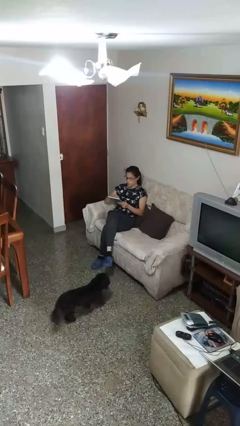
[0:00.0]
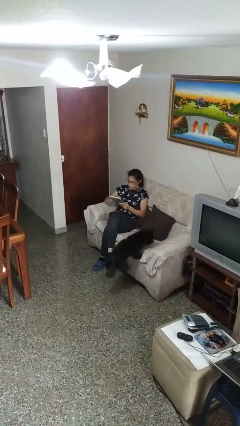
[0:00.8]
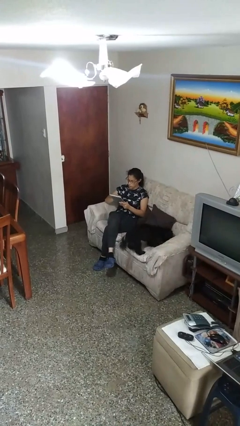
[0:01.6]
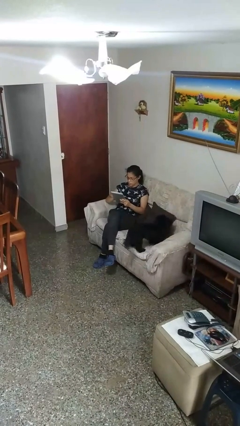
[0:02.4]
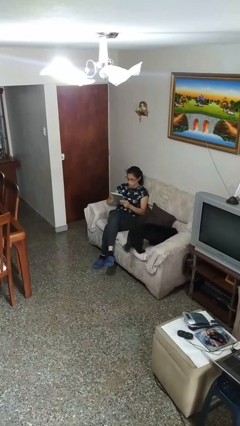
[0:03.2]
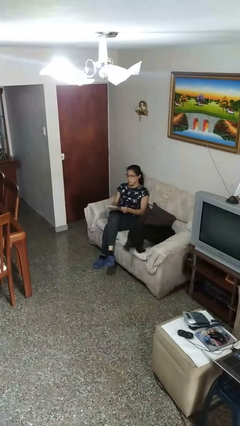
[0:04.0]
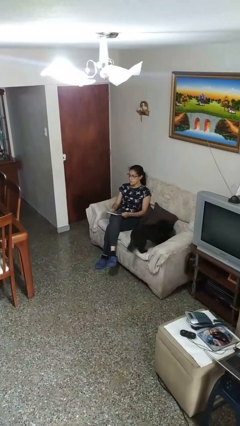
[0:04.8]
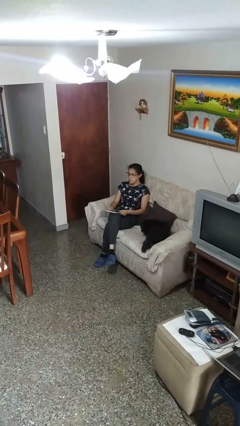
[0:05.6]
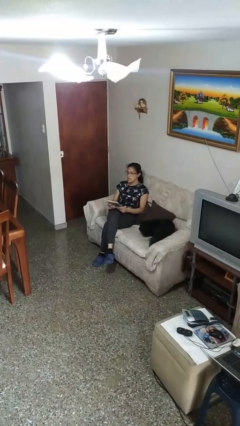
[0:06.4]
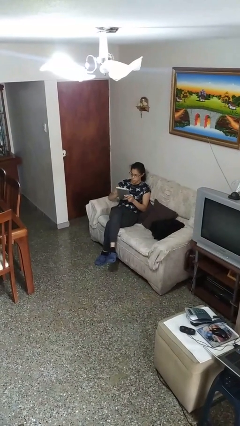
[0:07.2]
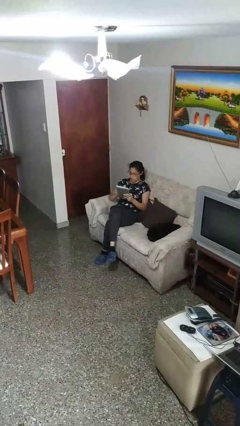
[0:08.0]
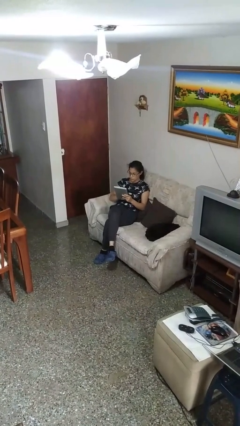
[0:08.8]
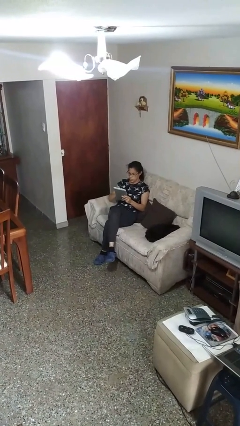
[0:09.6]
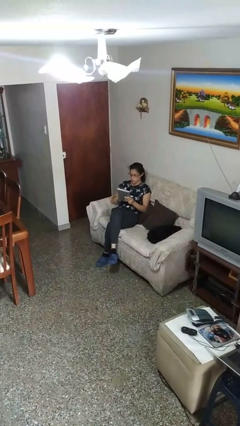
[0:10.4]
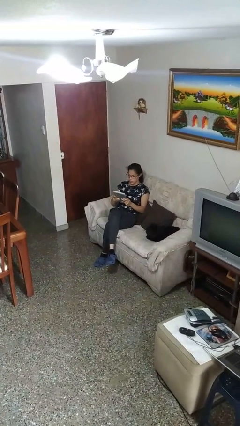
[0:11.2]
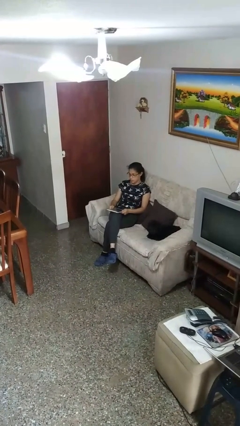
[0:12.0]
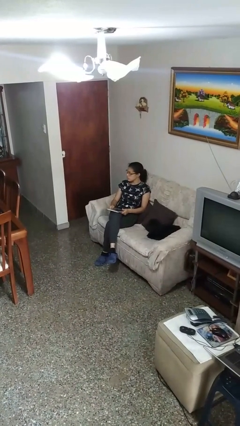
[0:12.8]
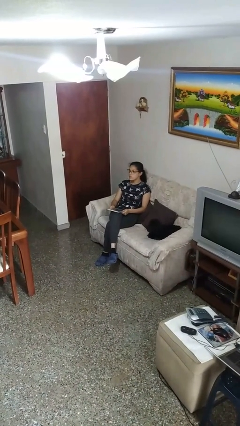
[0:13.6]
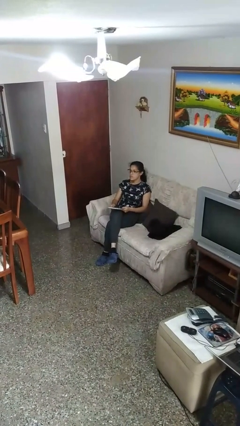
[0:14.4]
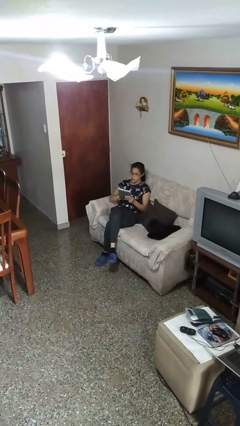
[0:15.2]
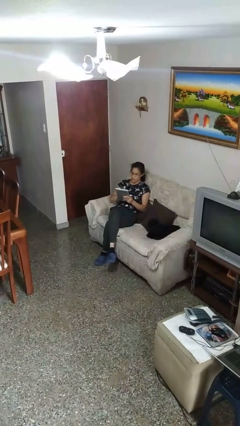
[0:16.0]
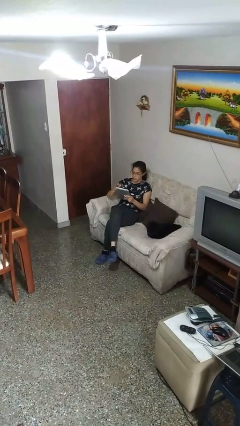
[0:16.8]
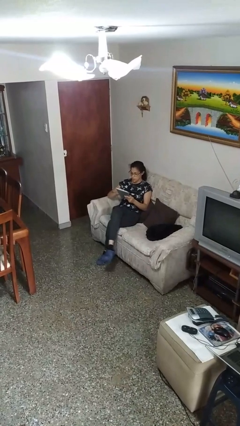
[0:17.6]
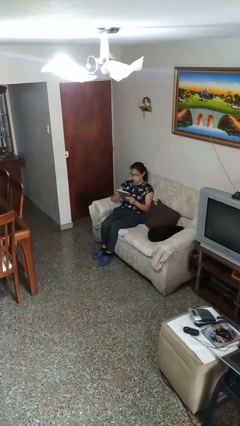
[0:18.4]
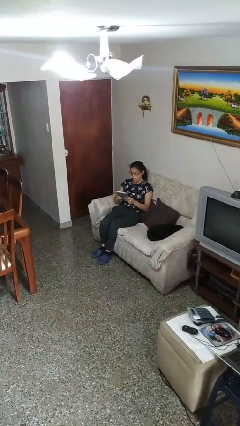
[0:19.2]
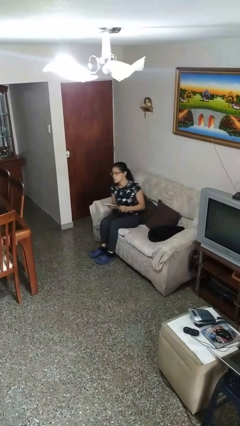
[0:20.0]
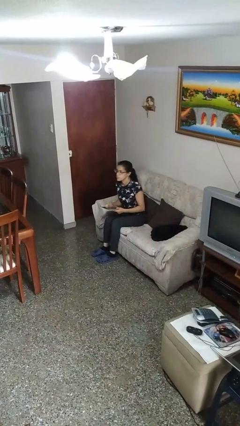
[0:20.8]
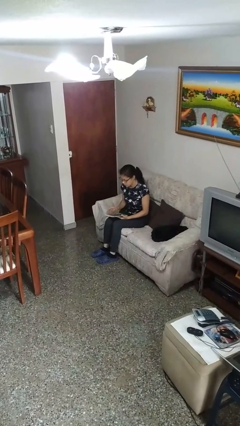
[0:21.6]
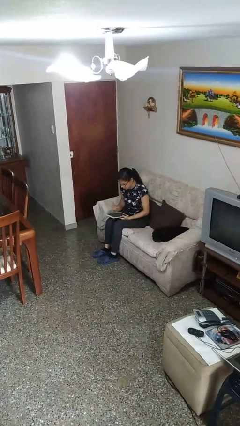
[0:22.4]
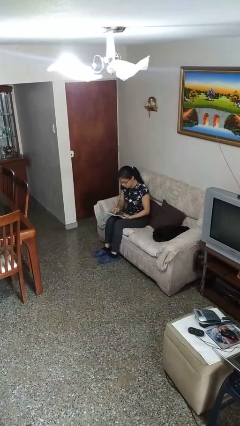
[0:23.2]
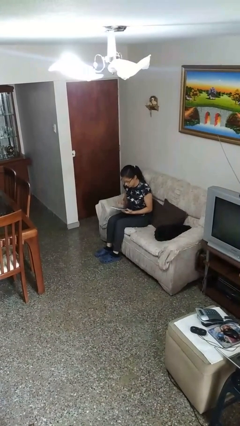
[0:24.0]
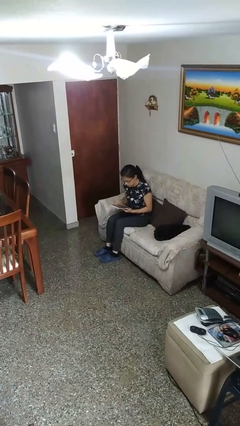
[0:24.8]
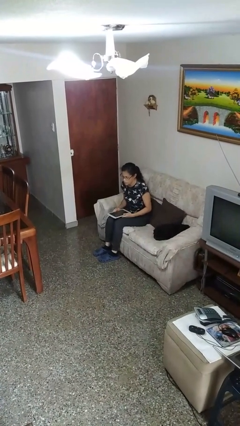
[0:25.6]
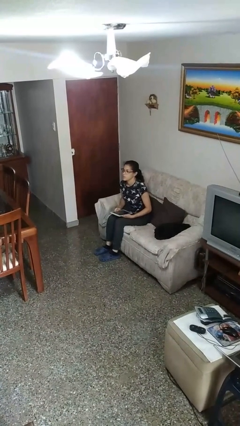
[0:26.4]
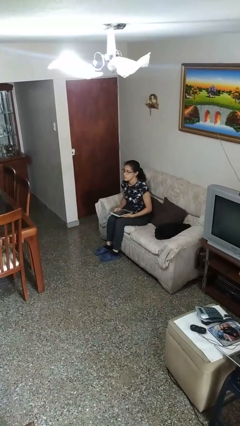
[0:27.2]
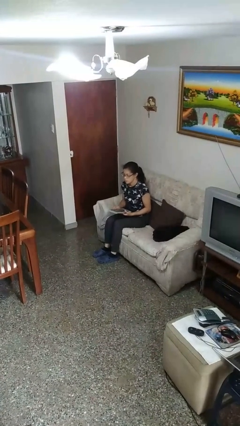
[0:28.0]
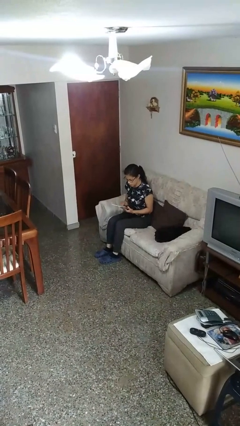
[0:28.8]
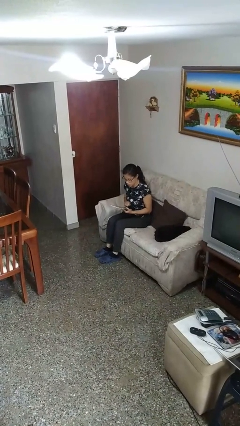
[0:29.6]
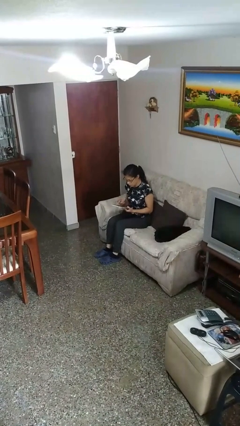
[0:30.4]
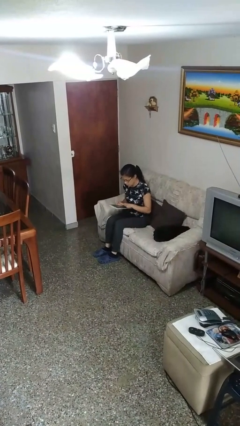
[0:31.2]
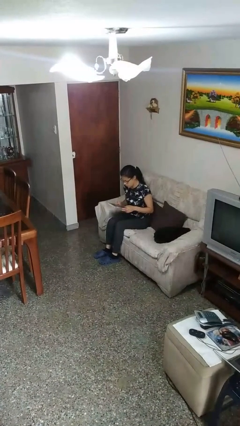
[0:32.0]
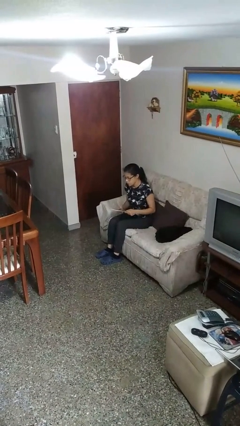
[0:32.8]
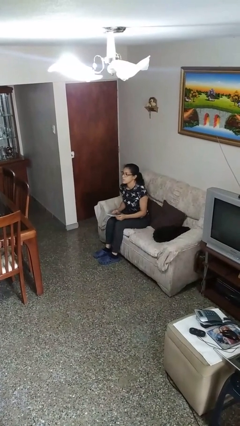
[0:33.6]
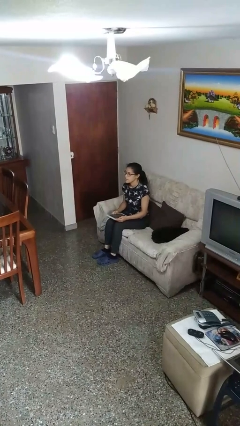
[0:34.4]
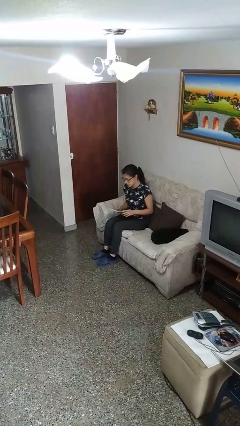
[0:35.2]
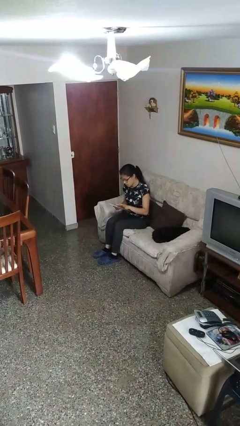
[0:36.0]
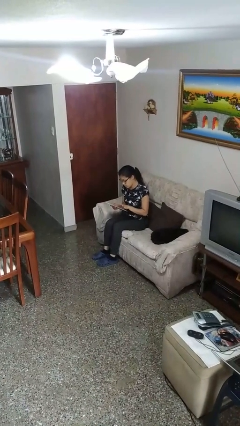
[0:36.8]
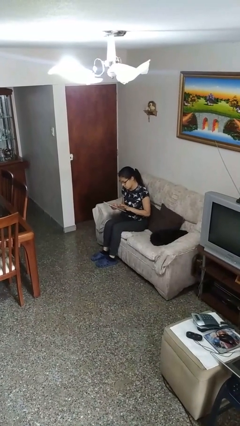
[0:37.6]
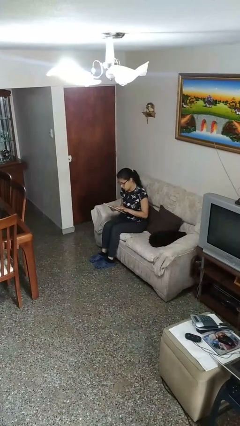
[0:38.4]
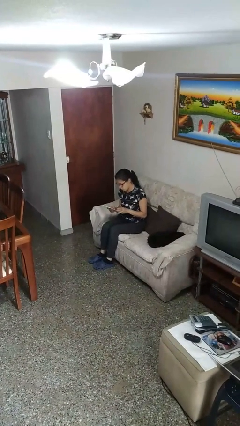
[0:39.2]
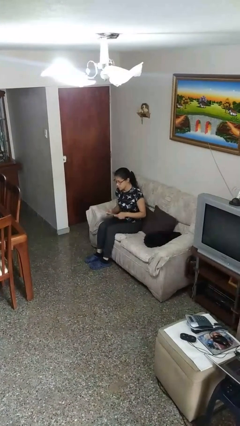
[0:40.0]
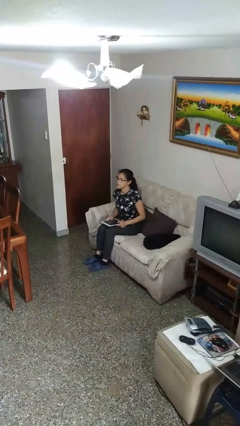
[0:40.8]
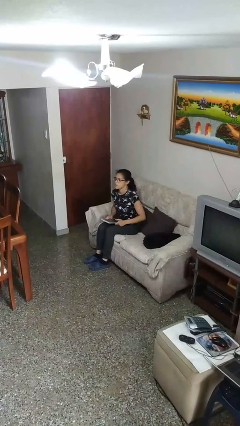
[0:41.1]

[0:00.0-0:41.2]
person interacts with tablet

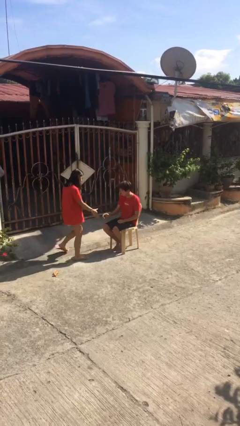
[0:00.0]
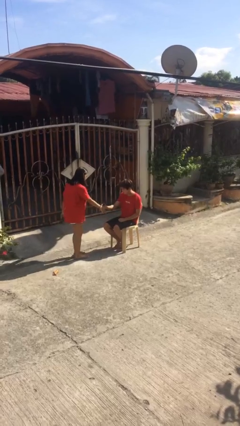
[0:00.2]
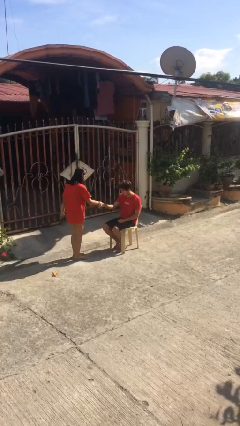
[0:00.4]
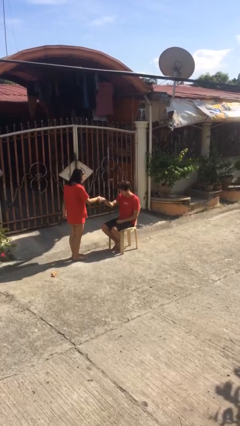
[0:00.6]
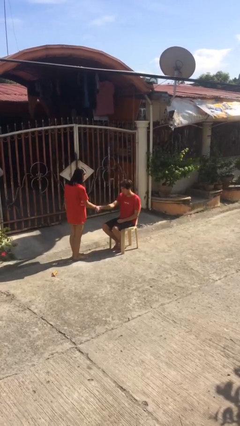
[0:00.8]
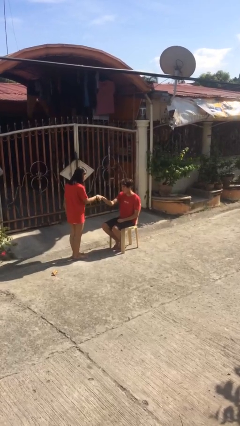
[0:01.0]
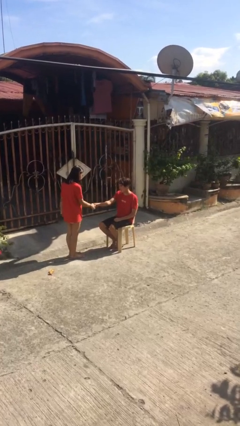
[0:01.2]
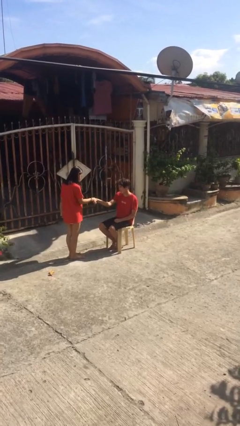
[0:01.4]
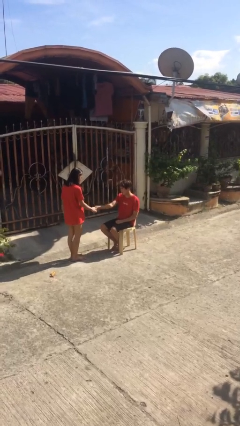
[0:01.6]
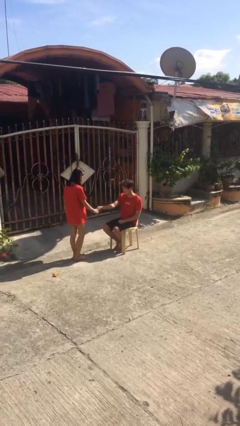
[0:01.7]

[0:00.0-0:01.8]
person shakes hand

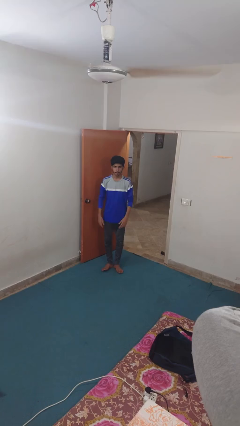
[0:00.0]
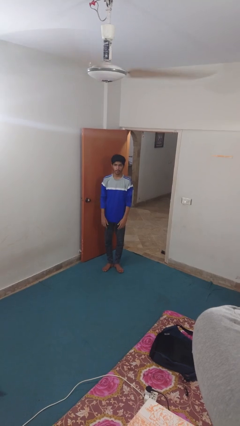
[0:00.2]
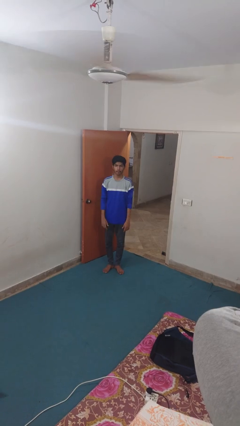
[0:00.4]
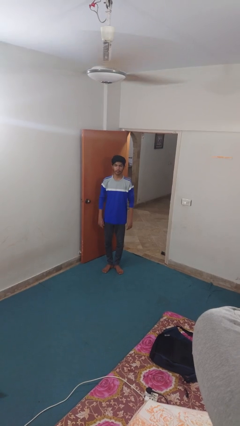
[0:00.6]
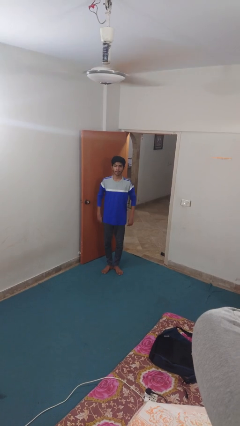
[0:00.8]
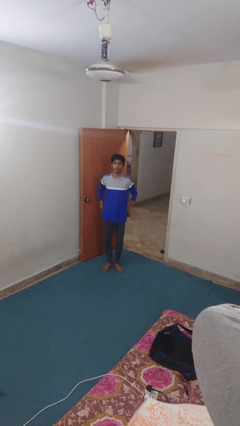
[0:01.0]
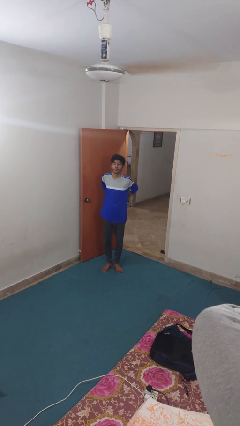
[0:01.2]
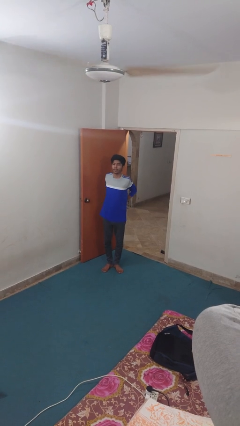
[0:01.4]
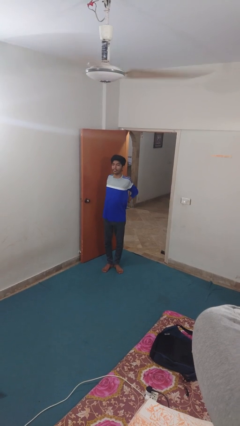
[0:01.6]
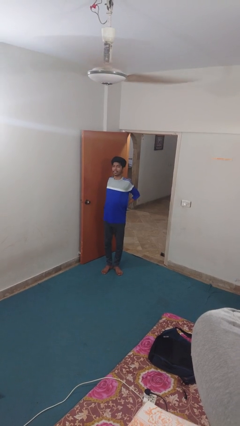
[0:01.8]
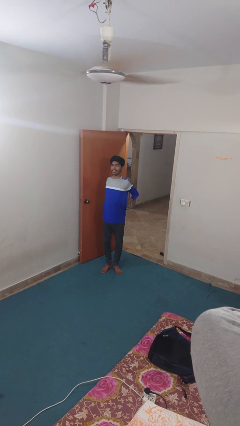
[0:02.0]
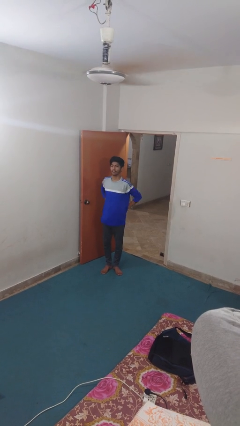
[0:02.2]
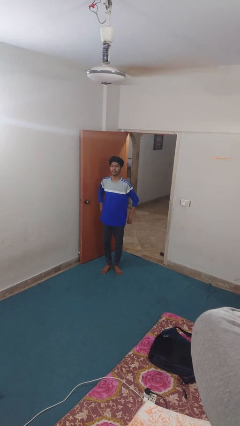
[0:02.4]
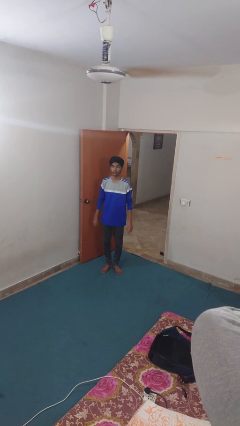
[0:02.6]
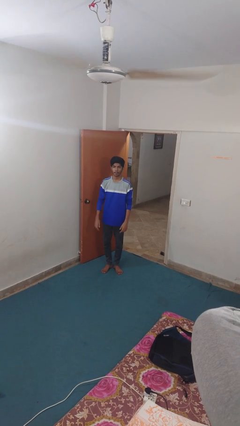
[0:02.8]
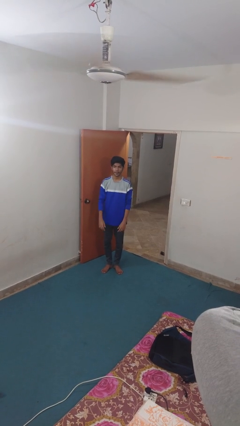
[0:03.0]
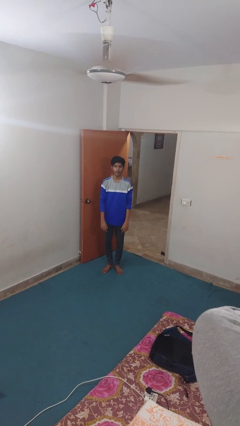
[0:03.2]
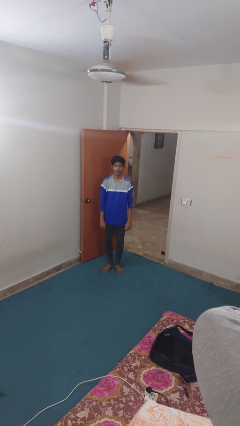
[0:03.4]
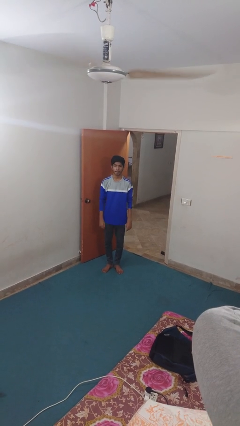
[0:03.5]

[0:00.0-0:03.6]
person stretches arms to side

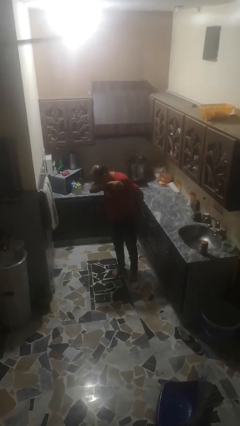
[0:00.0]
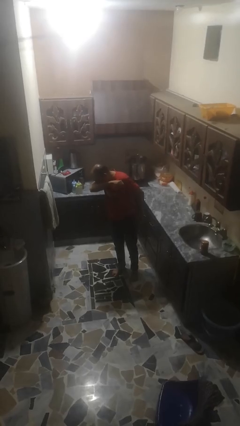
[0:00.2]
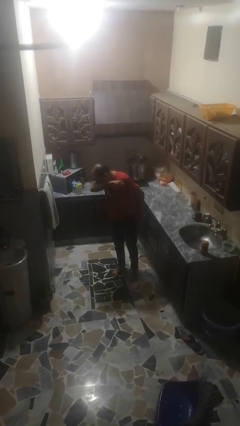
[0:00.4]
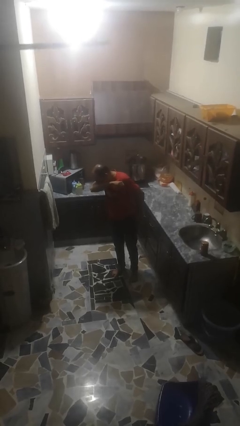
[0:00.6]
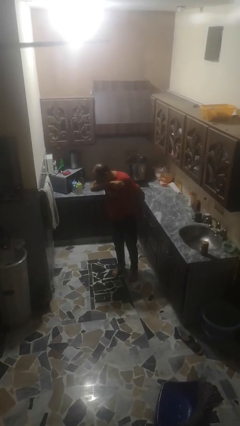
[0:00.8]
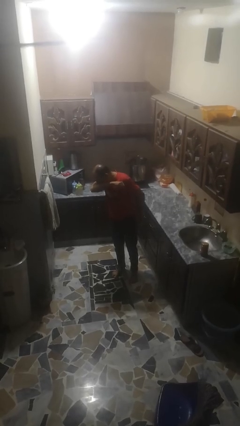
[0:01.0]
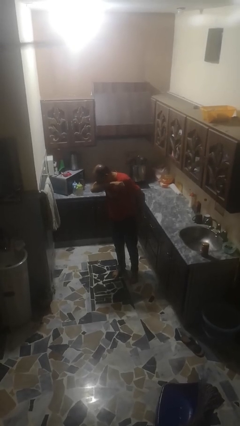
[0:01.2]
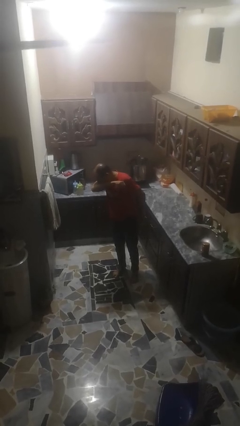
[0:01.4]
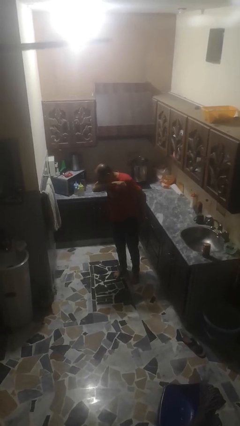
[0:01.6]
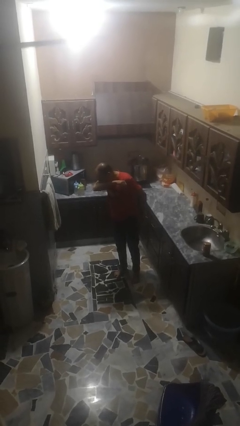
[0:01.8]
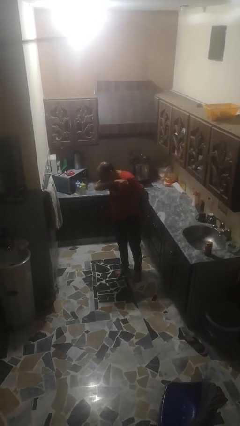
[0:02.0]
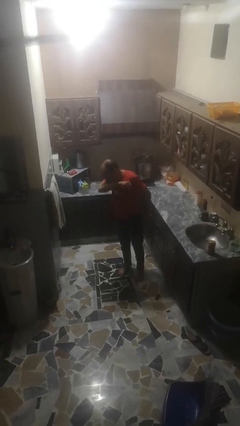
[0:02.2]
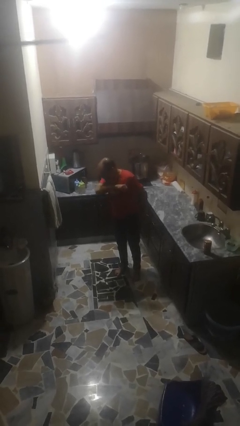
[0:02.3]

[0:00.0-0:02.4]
person sneezes into arm
